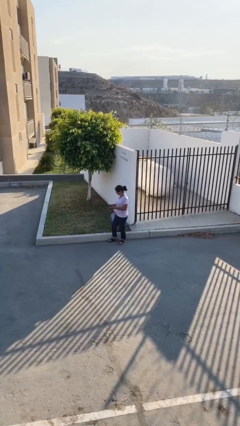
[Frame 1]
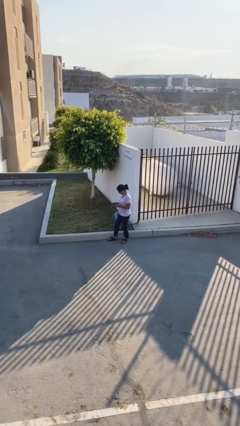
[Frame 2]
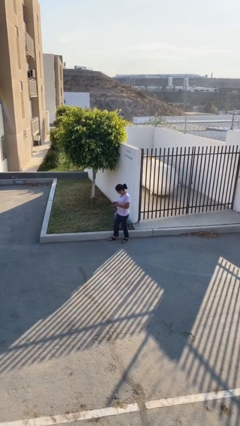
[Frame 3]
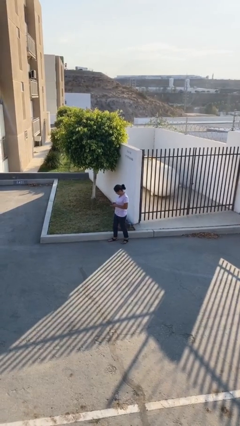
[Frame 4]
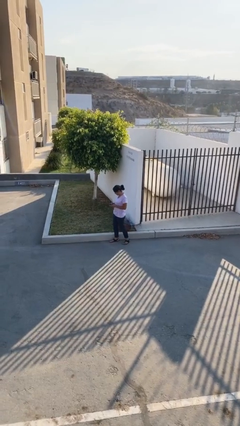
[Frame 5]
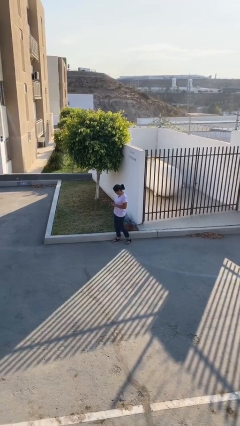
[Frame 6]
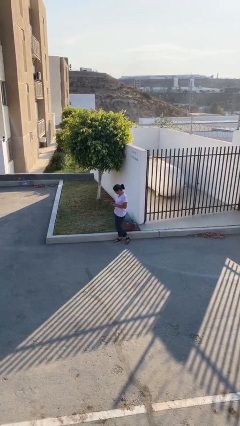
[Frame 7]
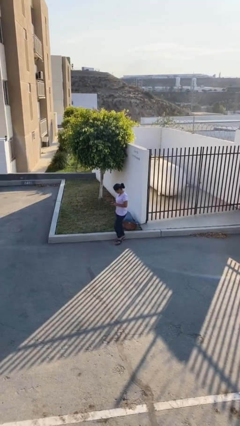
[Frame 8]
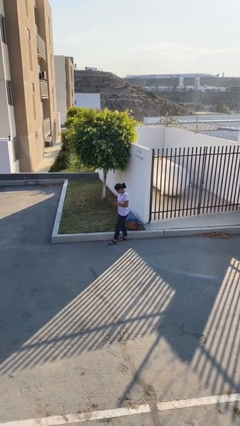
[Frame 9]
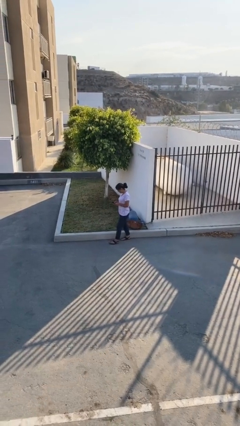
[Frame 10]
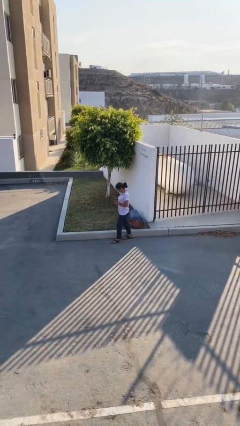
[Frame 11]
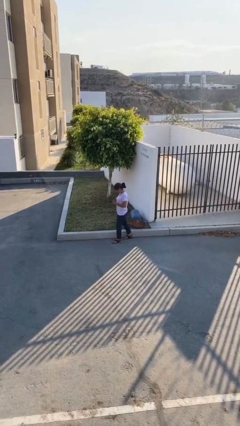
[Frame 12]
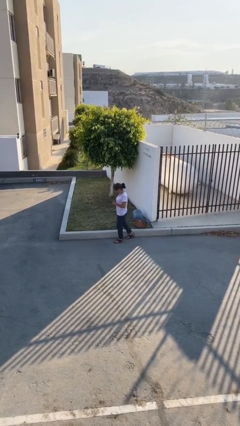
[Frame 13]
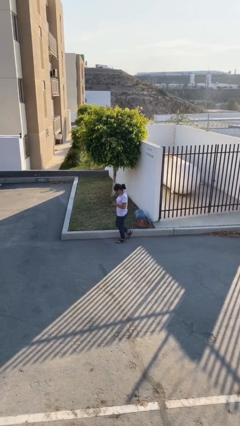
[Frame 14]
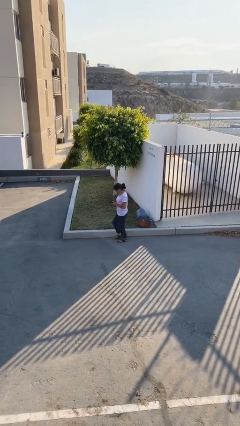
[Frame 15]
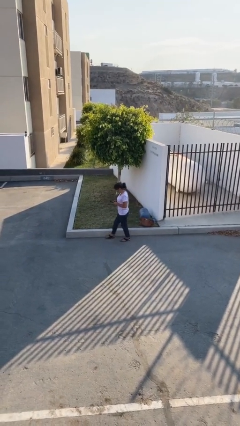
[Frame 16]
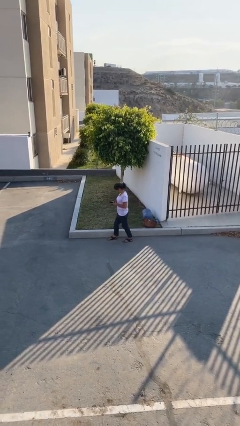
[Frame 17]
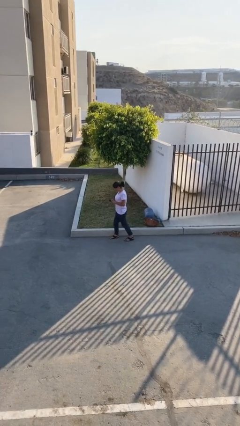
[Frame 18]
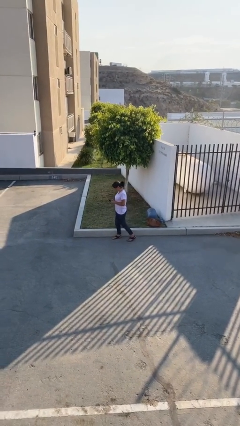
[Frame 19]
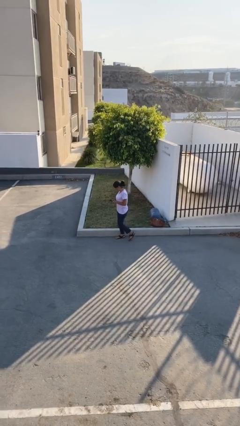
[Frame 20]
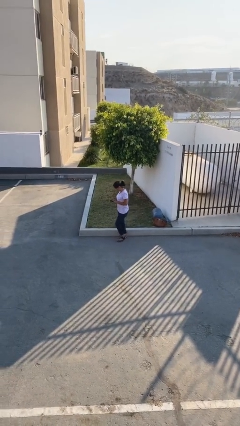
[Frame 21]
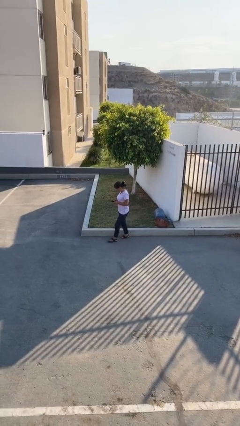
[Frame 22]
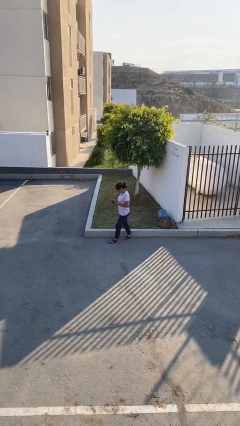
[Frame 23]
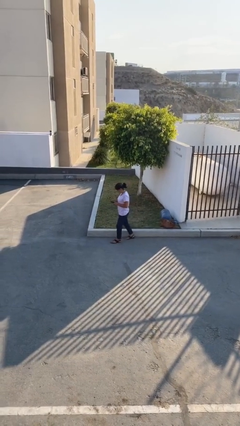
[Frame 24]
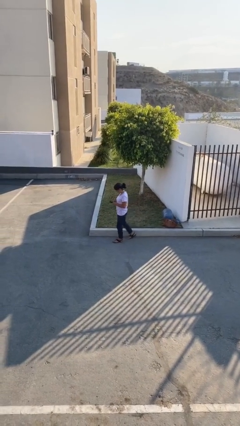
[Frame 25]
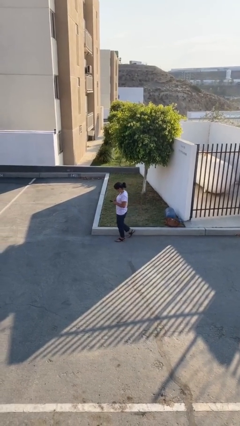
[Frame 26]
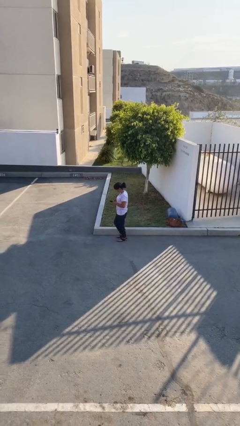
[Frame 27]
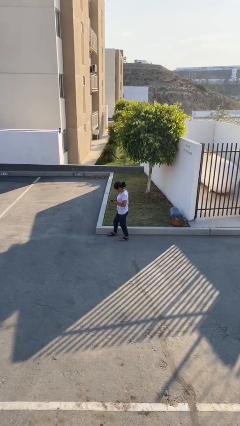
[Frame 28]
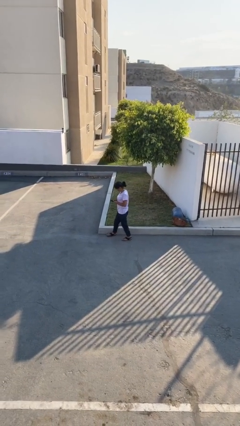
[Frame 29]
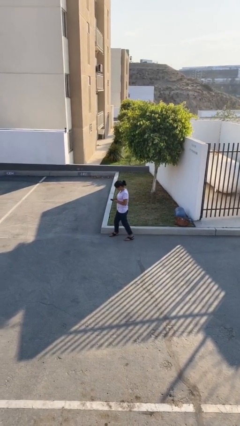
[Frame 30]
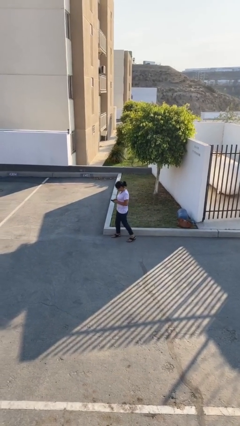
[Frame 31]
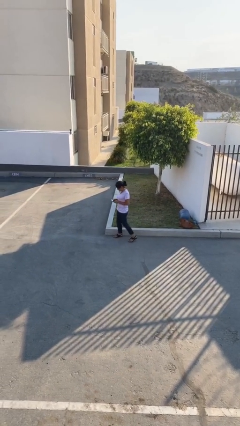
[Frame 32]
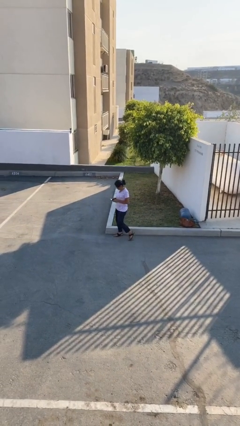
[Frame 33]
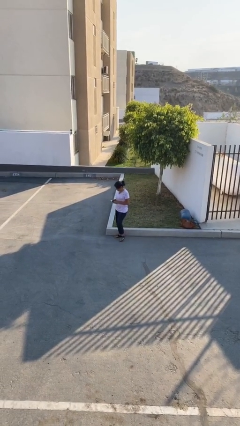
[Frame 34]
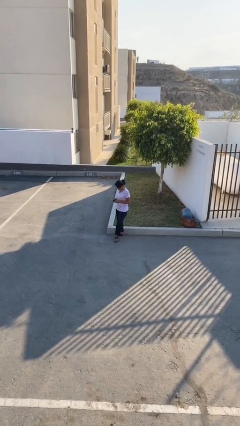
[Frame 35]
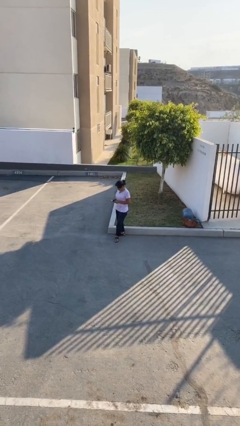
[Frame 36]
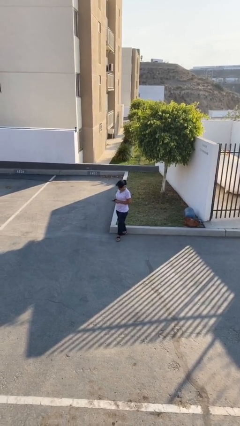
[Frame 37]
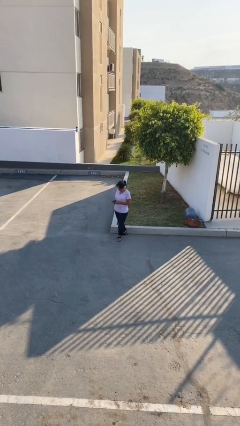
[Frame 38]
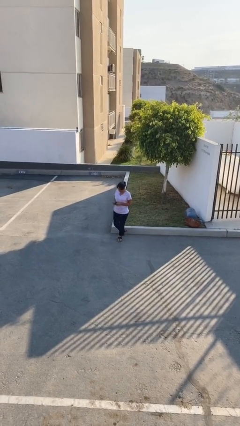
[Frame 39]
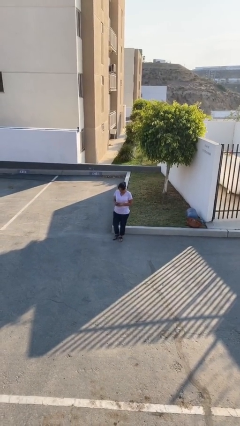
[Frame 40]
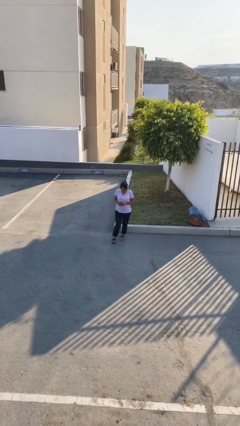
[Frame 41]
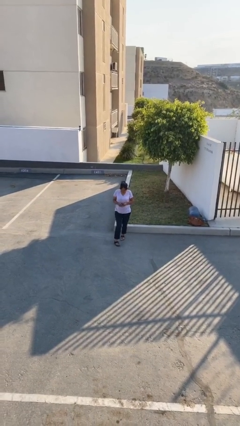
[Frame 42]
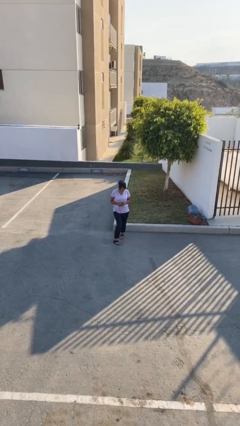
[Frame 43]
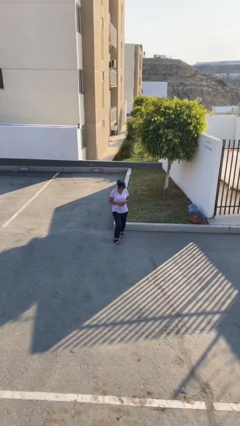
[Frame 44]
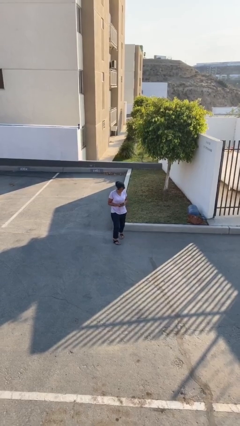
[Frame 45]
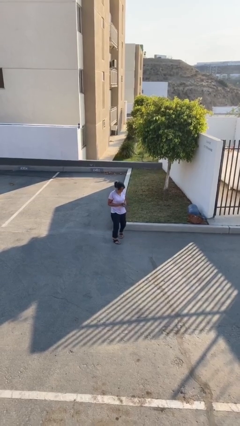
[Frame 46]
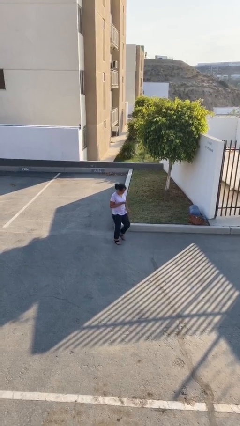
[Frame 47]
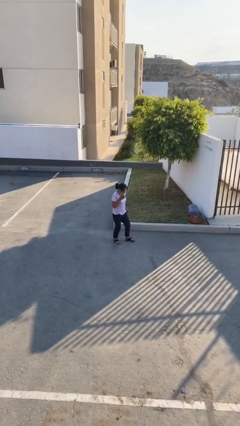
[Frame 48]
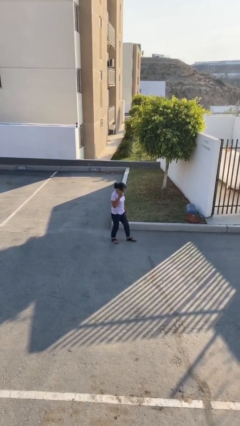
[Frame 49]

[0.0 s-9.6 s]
person texts on phone

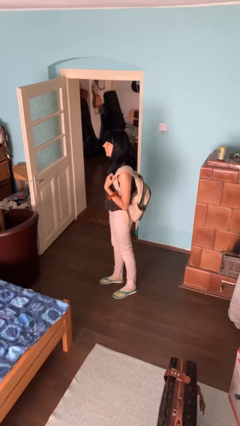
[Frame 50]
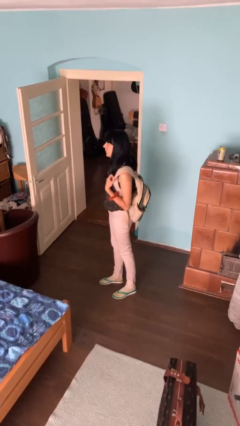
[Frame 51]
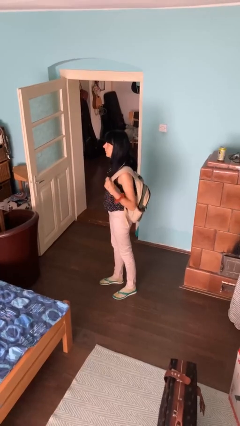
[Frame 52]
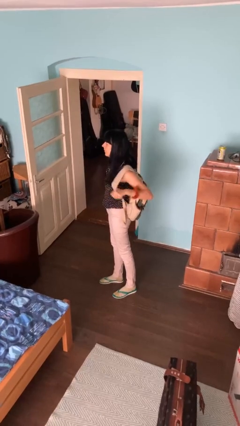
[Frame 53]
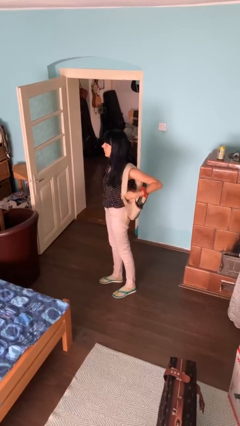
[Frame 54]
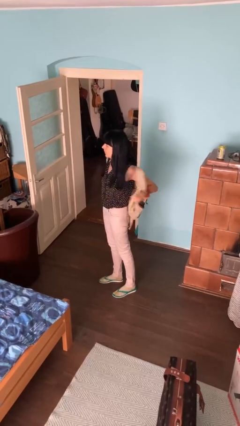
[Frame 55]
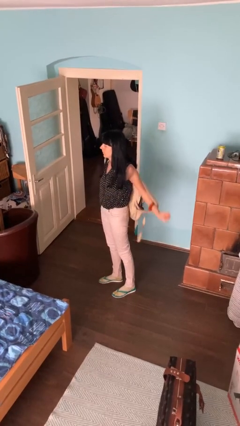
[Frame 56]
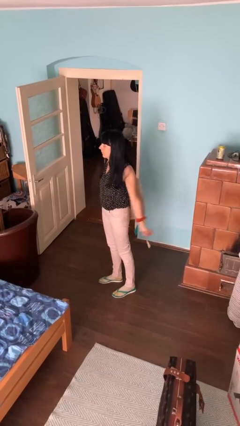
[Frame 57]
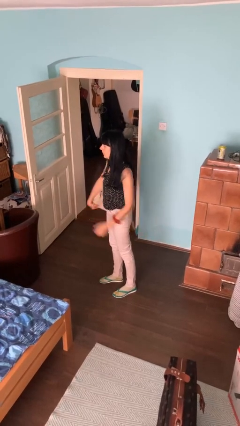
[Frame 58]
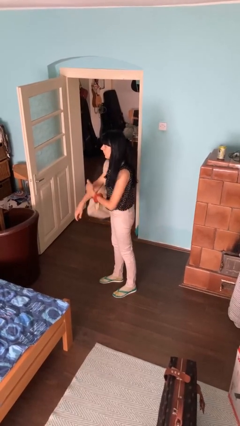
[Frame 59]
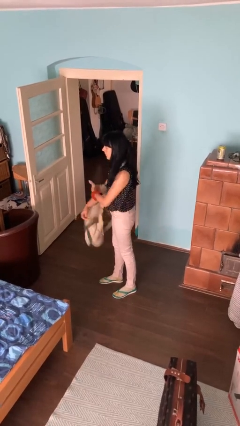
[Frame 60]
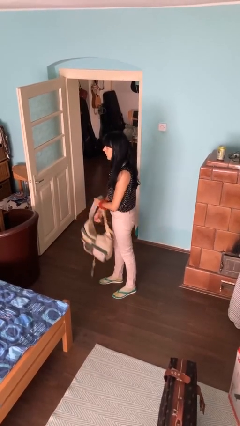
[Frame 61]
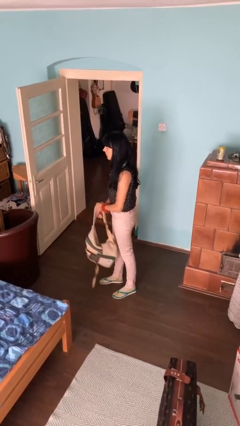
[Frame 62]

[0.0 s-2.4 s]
person takes off backpack

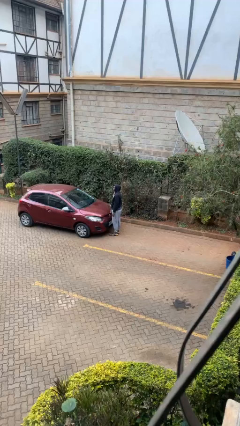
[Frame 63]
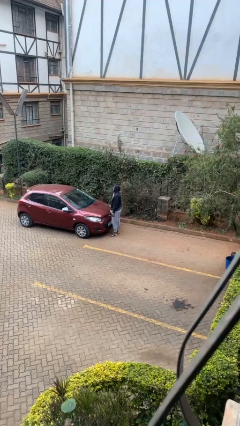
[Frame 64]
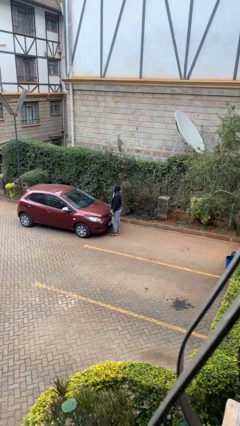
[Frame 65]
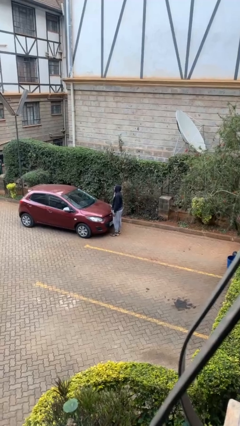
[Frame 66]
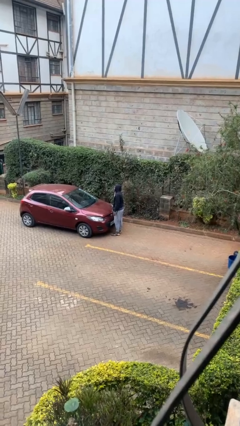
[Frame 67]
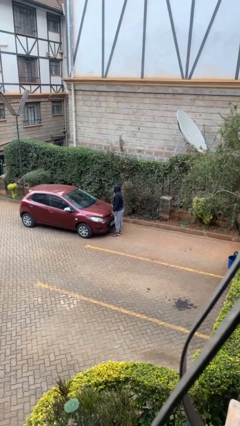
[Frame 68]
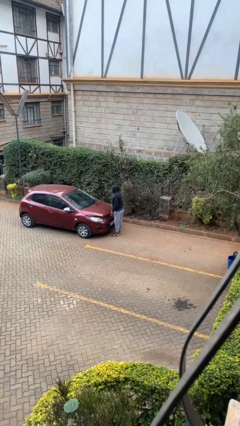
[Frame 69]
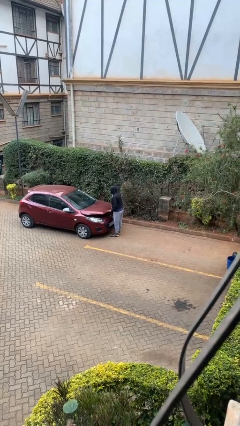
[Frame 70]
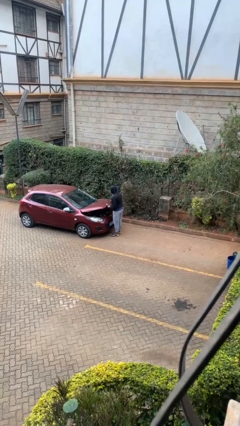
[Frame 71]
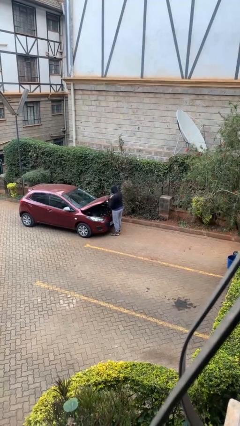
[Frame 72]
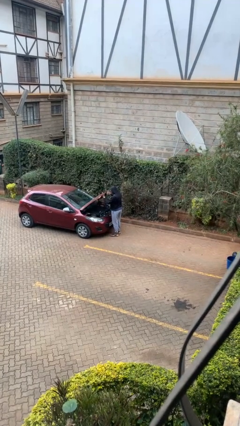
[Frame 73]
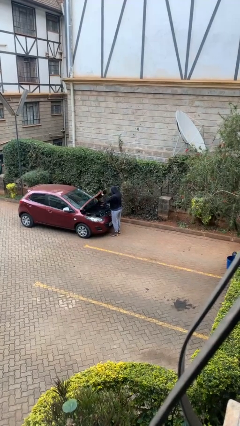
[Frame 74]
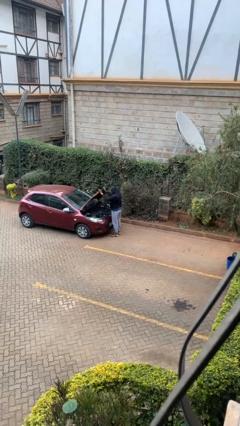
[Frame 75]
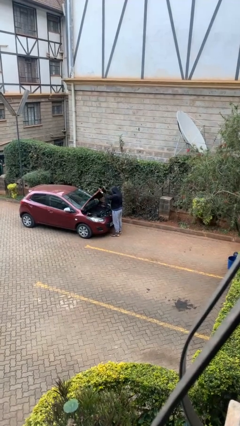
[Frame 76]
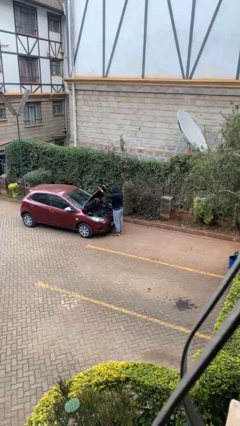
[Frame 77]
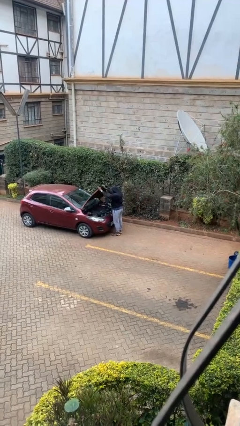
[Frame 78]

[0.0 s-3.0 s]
person opens car hood

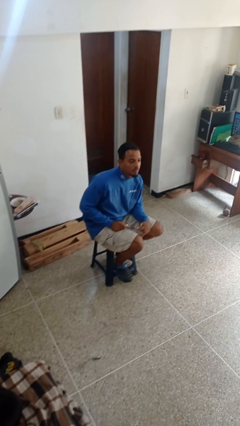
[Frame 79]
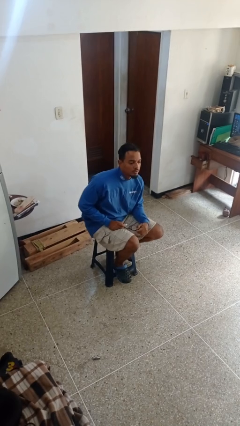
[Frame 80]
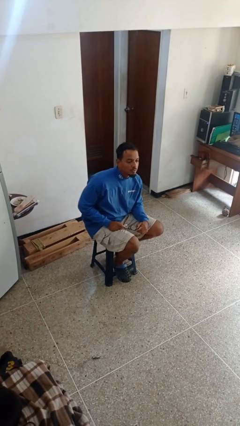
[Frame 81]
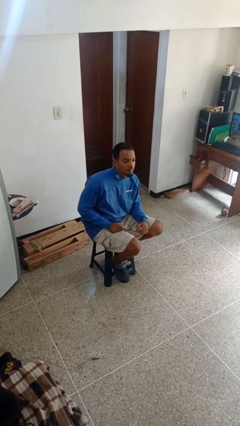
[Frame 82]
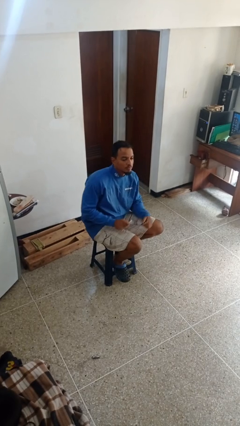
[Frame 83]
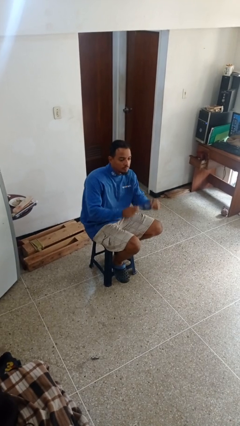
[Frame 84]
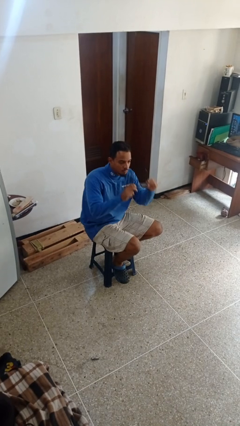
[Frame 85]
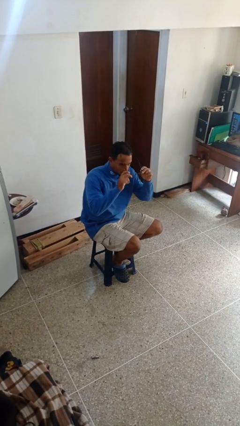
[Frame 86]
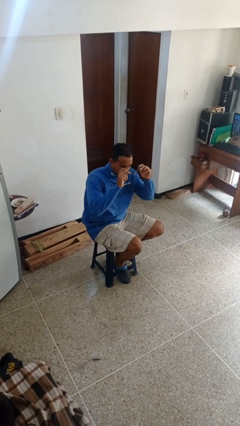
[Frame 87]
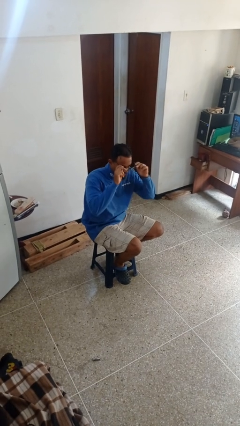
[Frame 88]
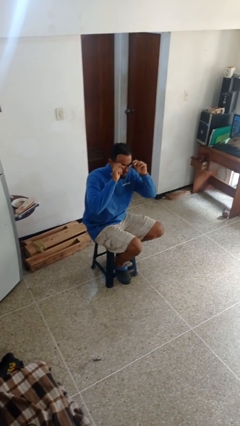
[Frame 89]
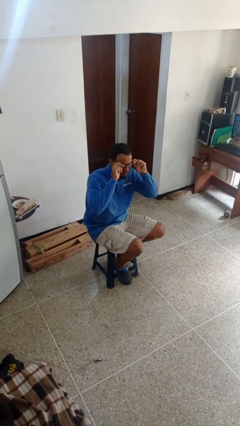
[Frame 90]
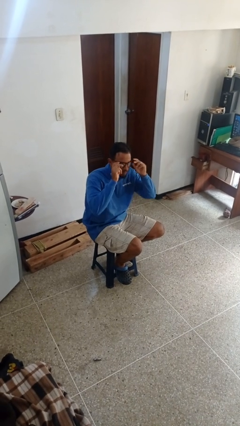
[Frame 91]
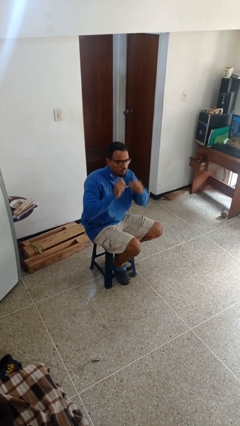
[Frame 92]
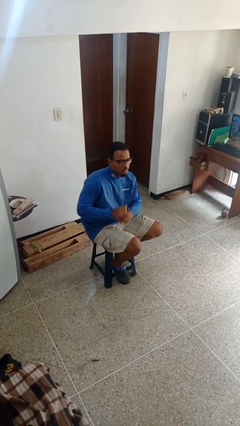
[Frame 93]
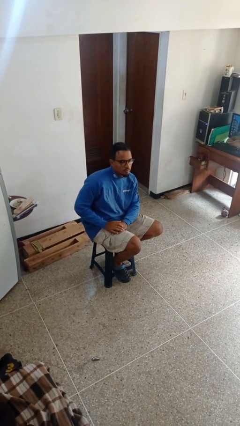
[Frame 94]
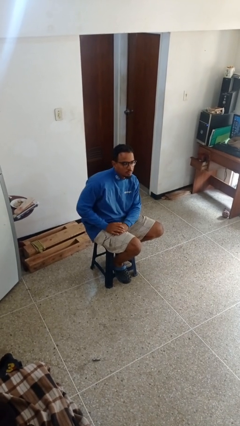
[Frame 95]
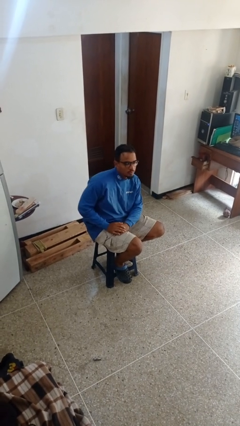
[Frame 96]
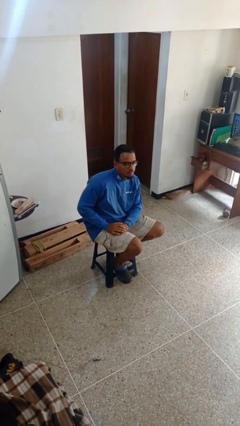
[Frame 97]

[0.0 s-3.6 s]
person puts on glasses
